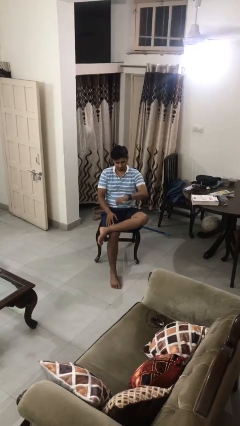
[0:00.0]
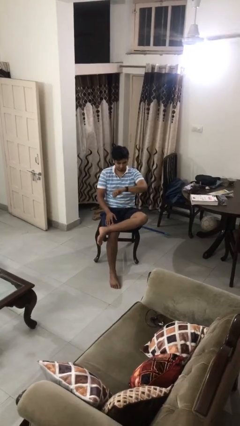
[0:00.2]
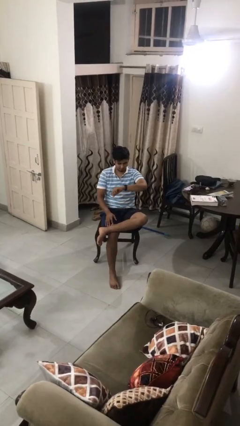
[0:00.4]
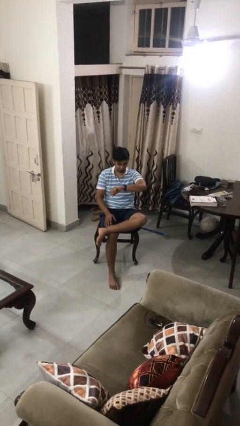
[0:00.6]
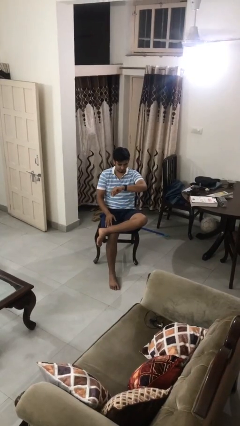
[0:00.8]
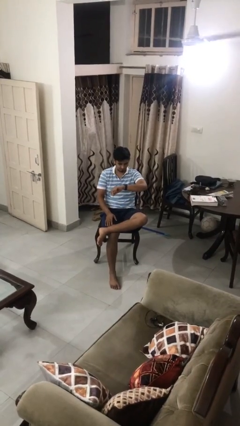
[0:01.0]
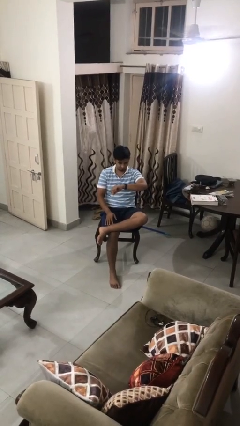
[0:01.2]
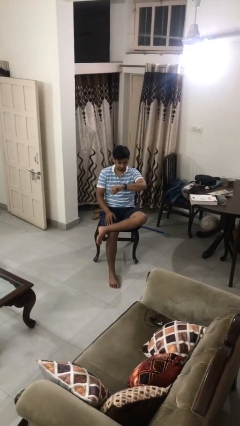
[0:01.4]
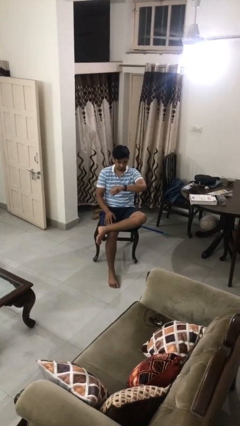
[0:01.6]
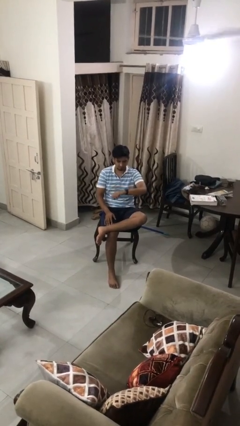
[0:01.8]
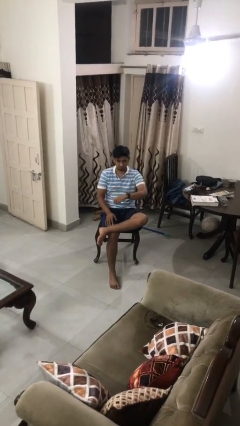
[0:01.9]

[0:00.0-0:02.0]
person looks at wristwatch

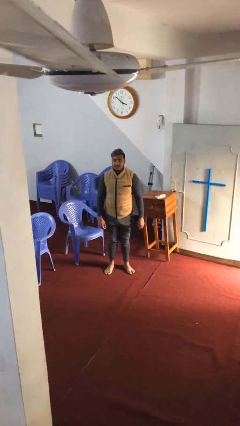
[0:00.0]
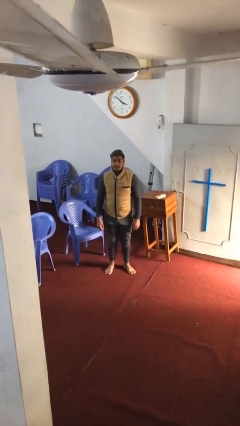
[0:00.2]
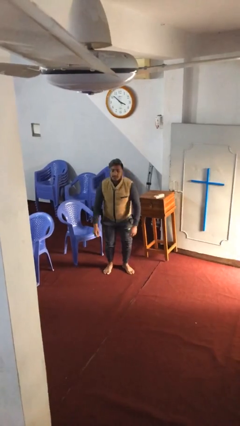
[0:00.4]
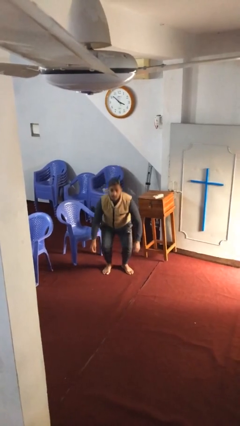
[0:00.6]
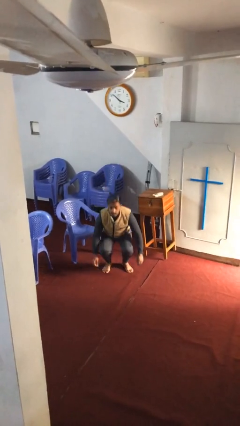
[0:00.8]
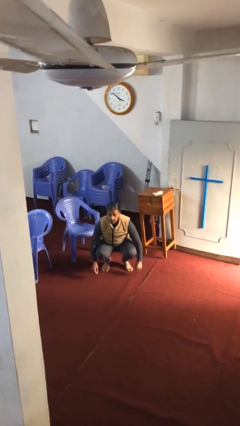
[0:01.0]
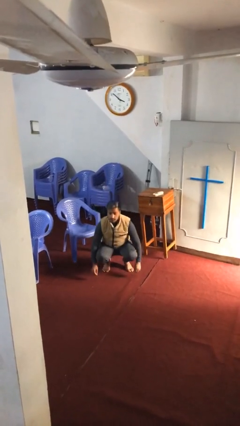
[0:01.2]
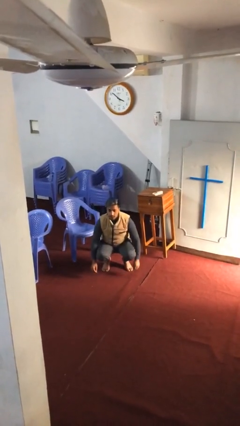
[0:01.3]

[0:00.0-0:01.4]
person sits down

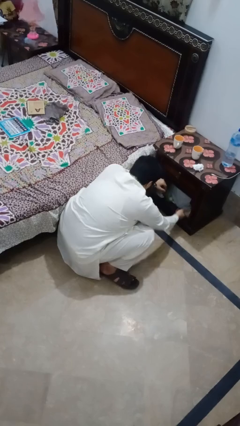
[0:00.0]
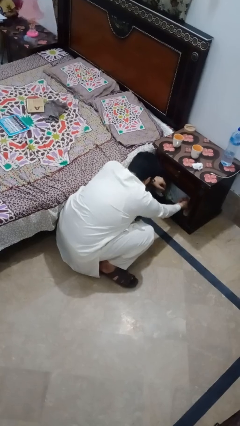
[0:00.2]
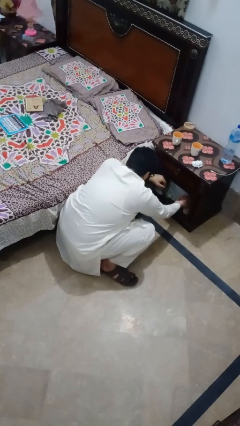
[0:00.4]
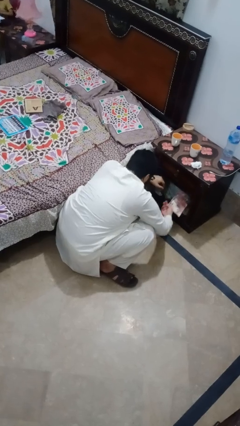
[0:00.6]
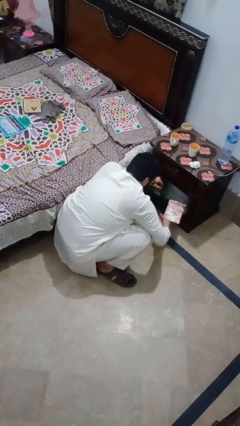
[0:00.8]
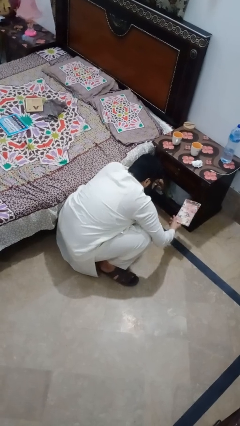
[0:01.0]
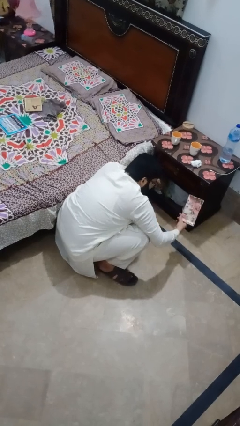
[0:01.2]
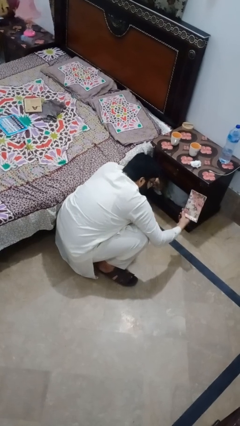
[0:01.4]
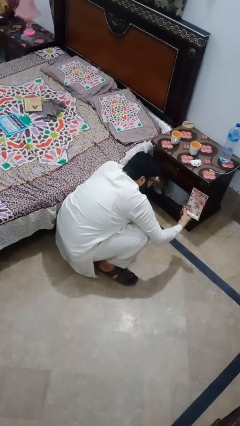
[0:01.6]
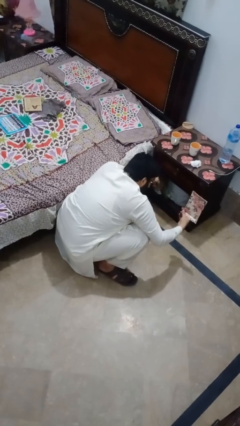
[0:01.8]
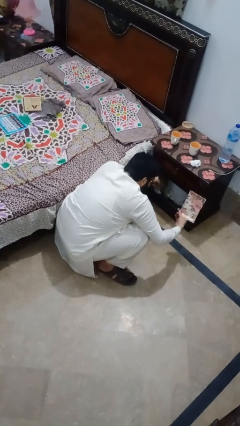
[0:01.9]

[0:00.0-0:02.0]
person picks up object from cabinet

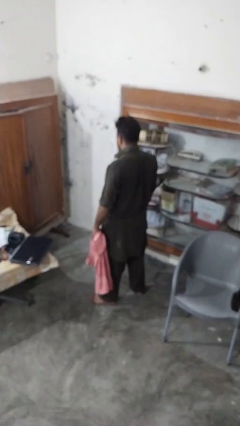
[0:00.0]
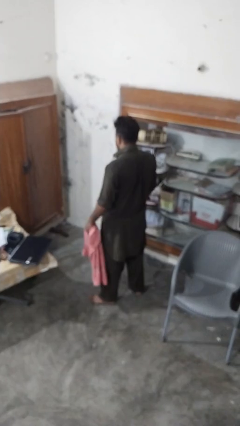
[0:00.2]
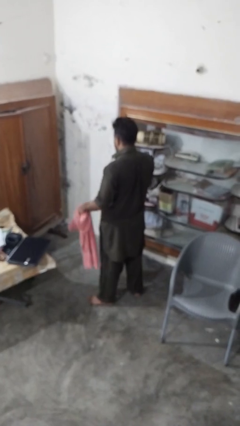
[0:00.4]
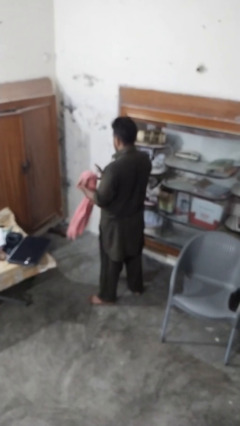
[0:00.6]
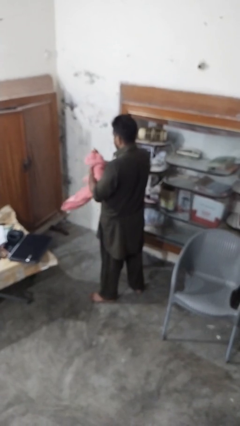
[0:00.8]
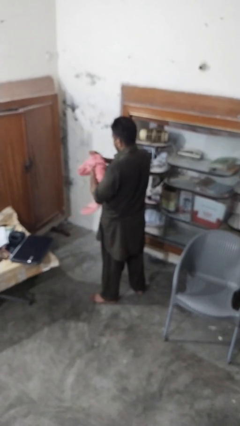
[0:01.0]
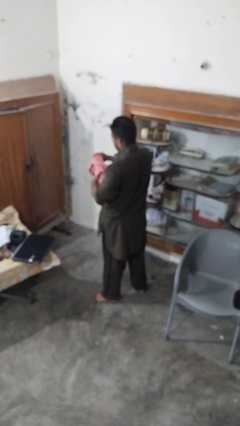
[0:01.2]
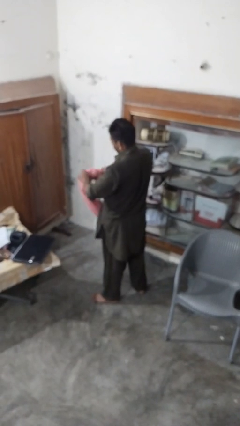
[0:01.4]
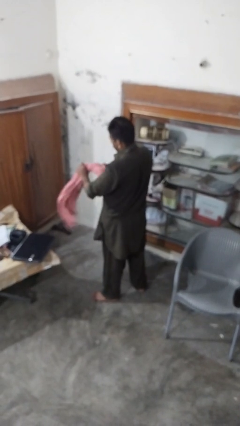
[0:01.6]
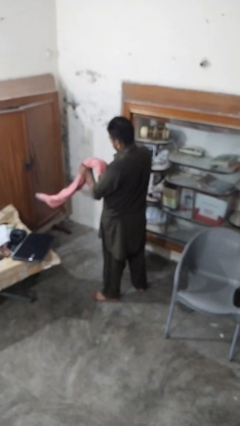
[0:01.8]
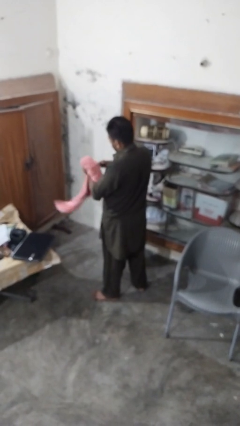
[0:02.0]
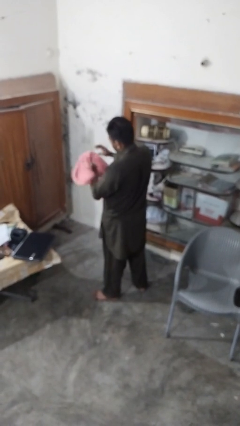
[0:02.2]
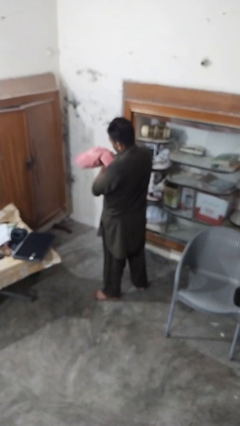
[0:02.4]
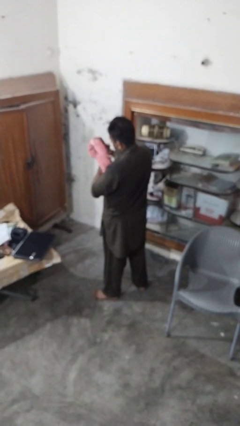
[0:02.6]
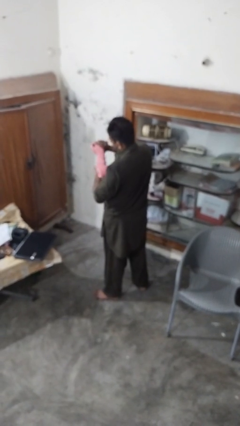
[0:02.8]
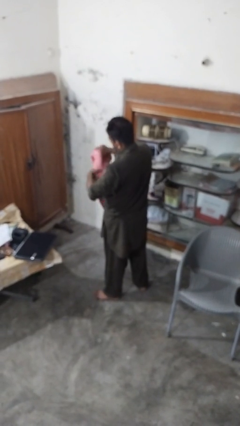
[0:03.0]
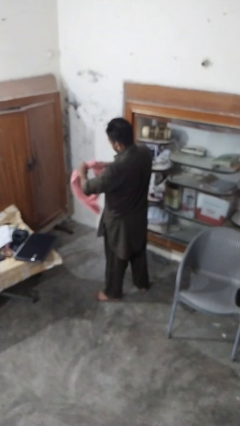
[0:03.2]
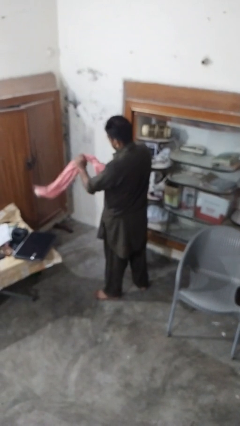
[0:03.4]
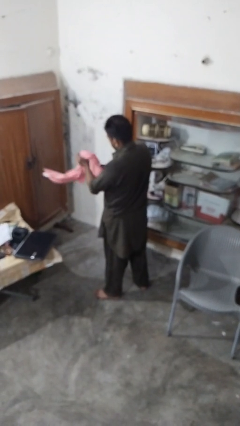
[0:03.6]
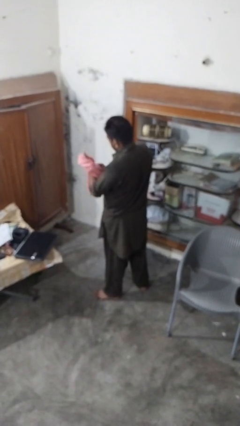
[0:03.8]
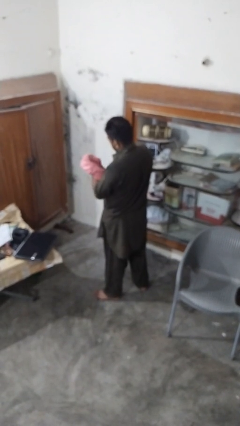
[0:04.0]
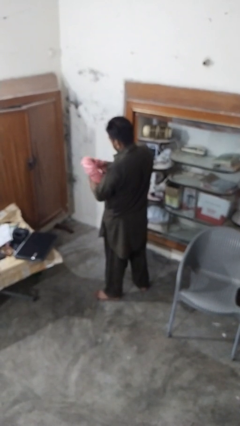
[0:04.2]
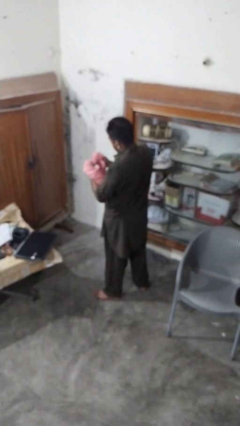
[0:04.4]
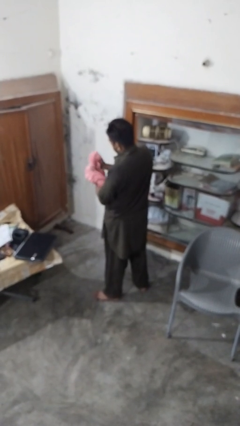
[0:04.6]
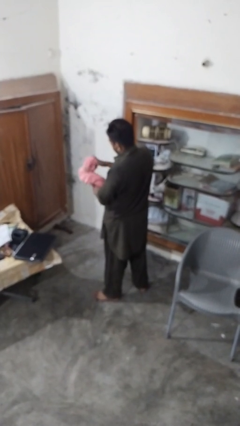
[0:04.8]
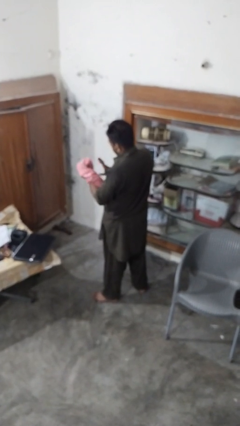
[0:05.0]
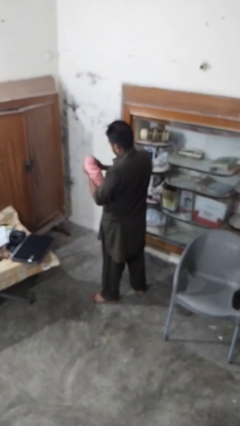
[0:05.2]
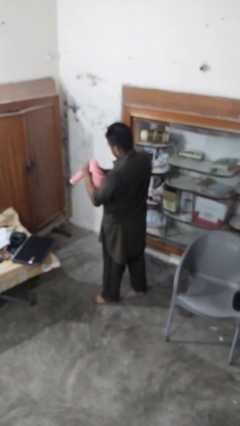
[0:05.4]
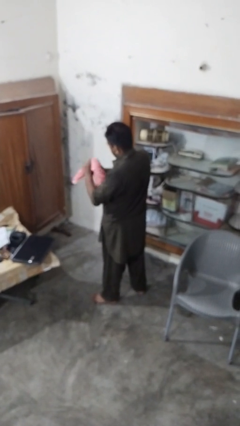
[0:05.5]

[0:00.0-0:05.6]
person squeezes object

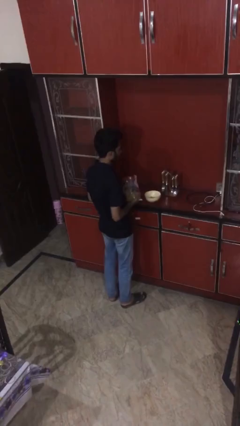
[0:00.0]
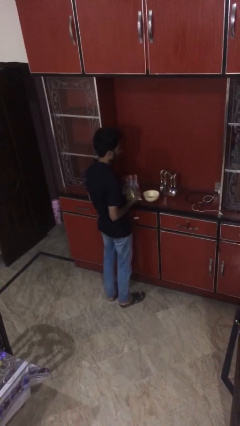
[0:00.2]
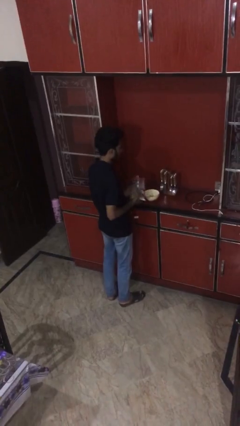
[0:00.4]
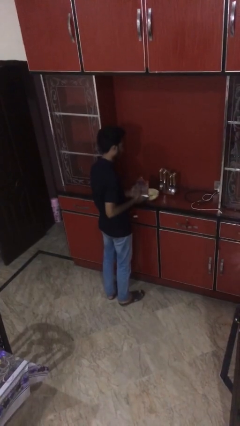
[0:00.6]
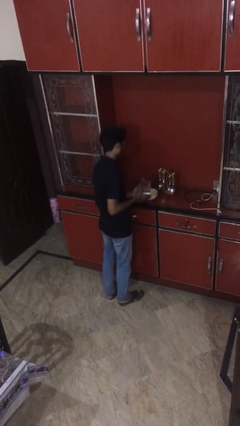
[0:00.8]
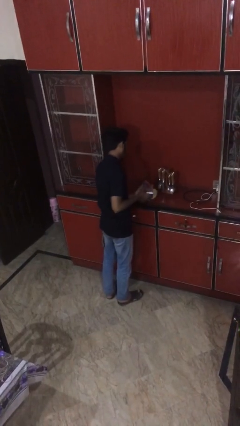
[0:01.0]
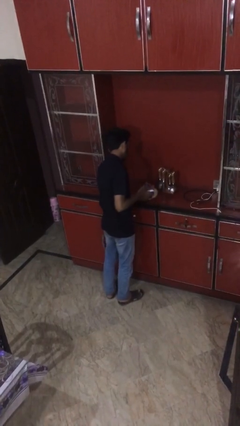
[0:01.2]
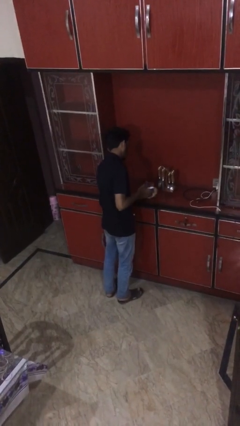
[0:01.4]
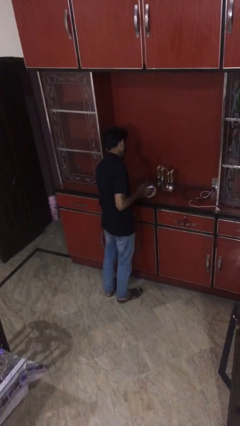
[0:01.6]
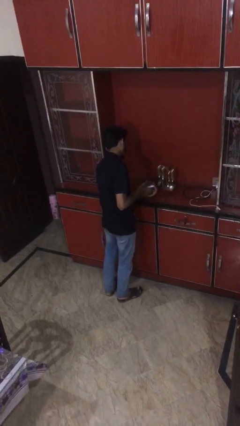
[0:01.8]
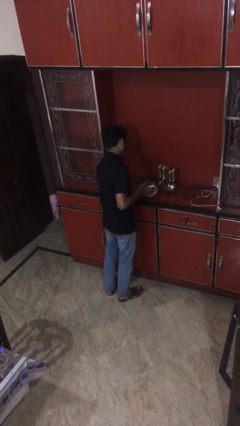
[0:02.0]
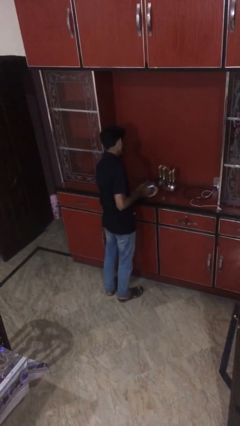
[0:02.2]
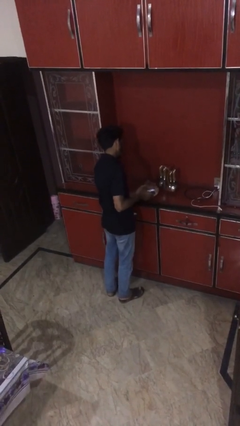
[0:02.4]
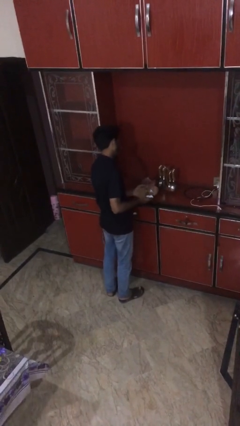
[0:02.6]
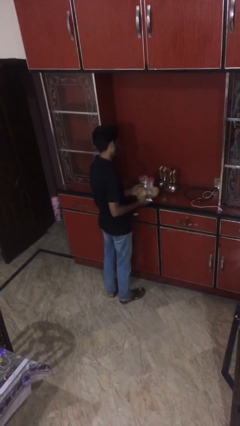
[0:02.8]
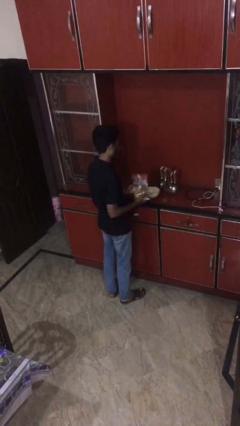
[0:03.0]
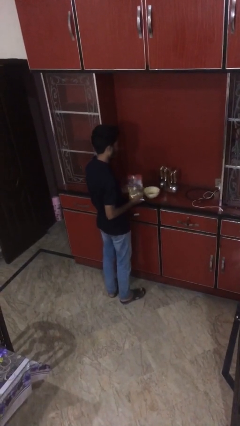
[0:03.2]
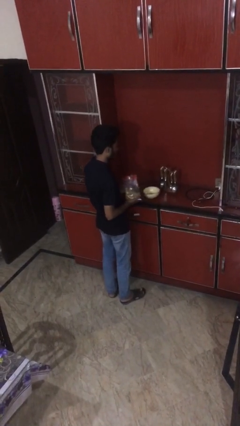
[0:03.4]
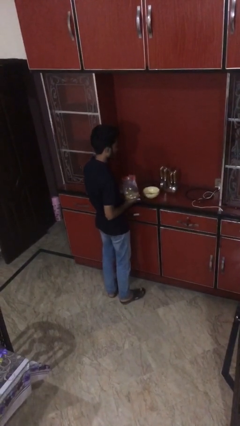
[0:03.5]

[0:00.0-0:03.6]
person pours into bowl

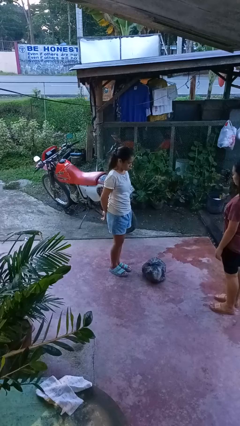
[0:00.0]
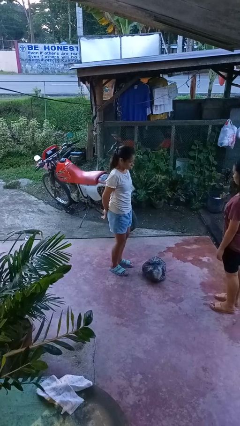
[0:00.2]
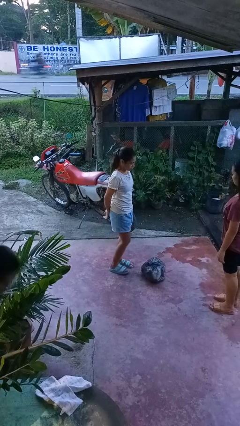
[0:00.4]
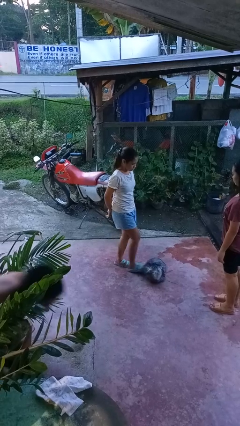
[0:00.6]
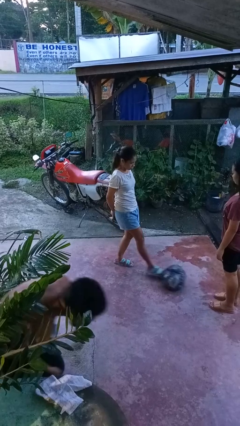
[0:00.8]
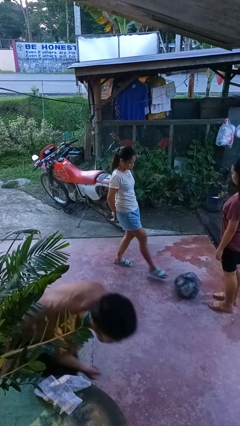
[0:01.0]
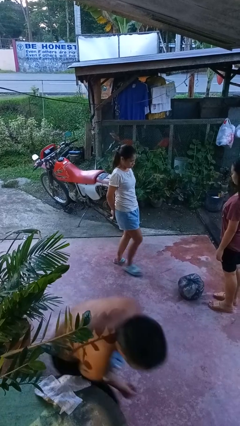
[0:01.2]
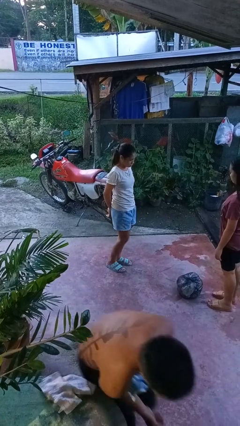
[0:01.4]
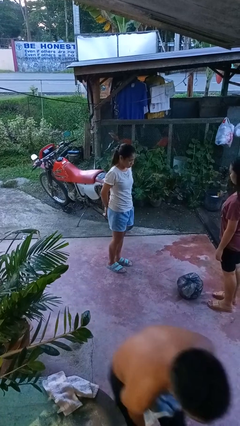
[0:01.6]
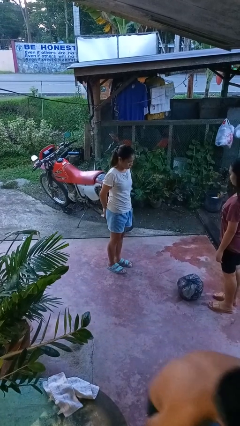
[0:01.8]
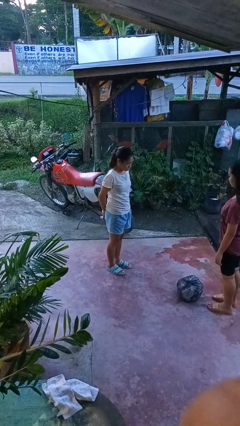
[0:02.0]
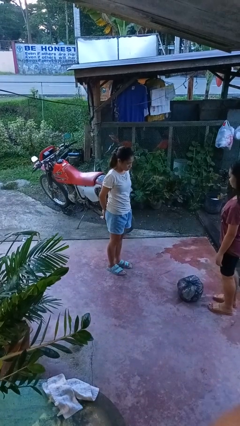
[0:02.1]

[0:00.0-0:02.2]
person kicks object to person

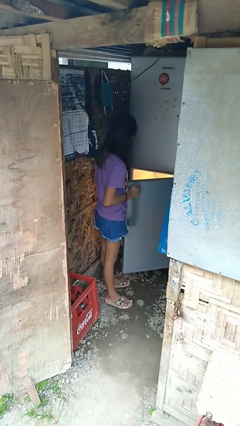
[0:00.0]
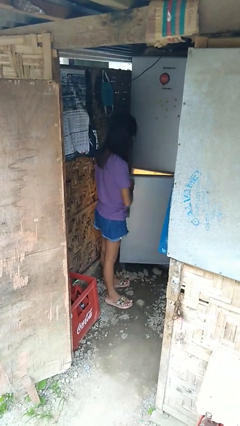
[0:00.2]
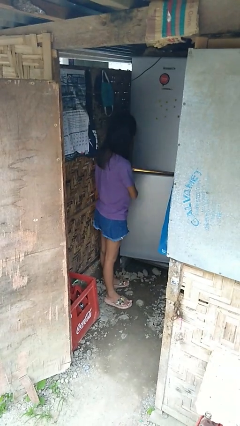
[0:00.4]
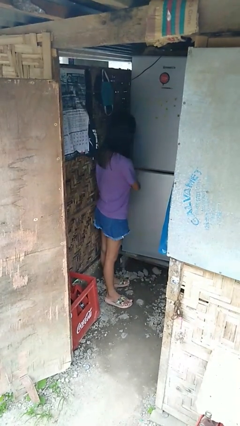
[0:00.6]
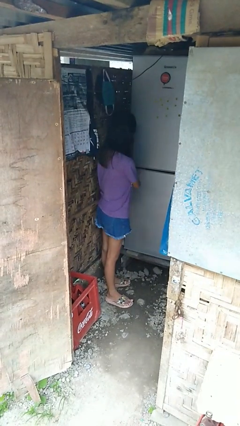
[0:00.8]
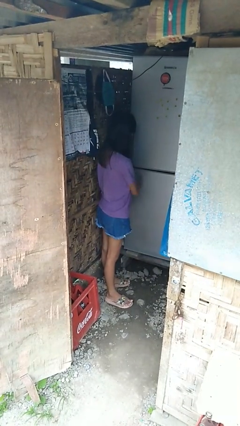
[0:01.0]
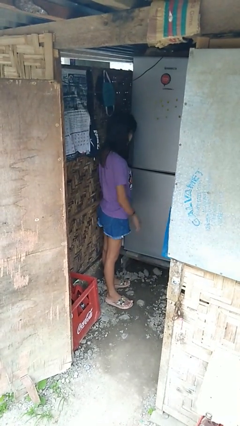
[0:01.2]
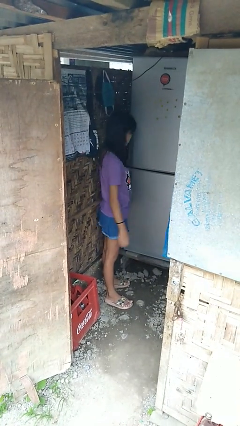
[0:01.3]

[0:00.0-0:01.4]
person closes refrigerator
